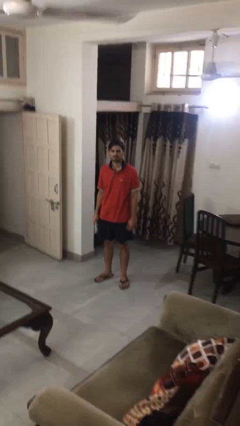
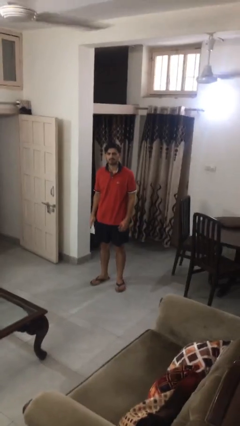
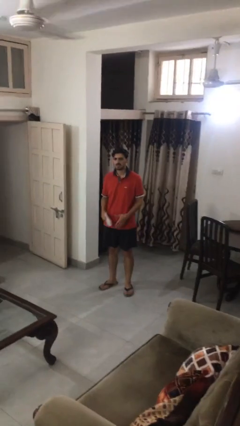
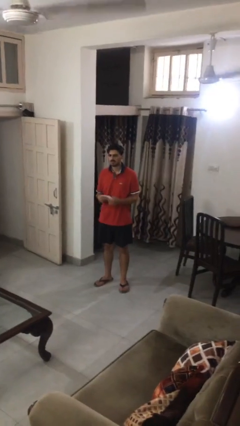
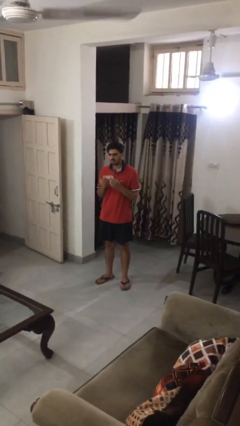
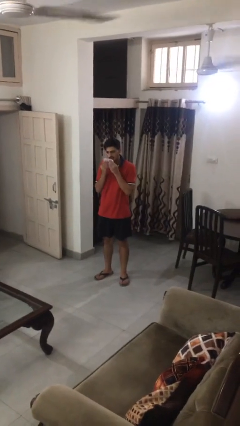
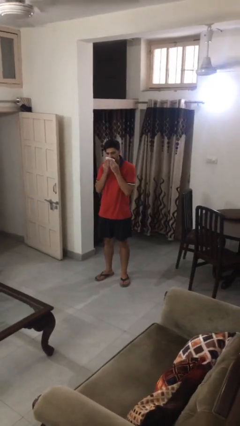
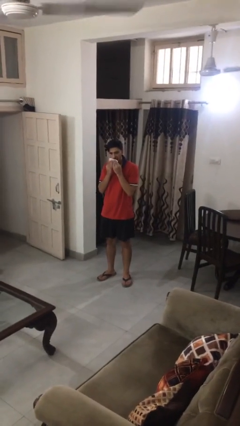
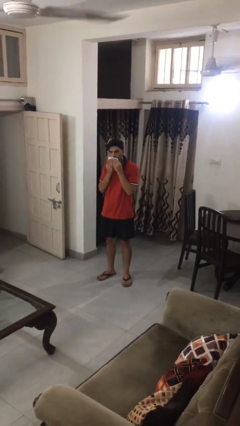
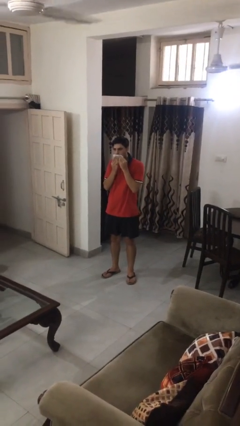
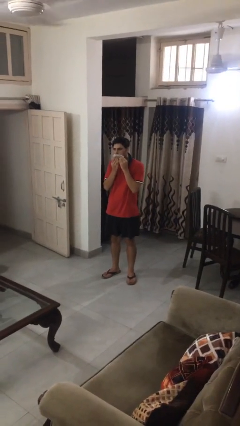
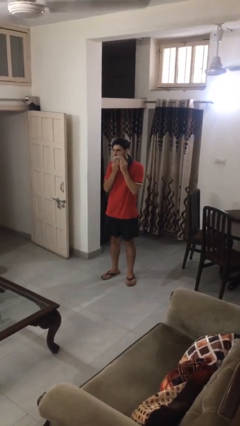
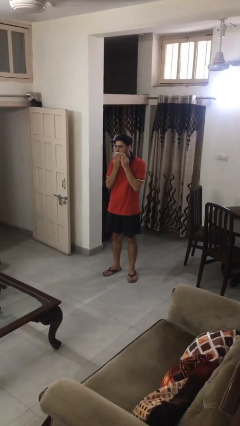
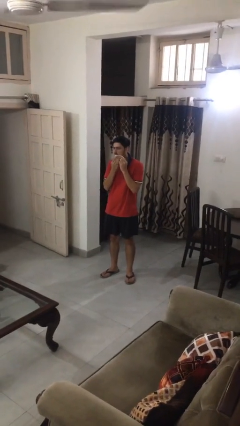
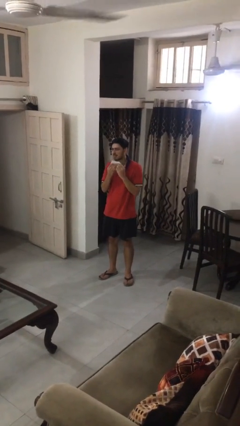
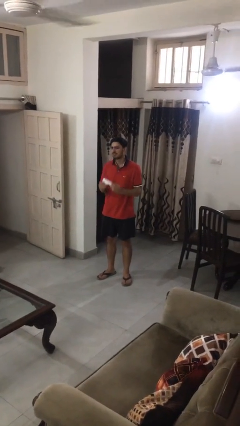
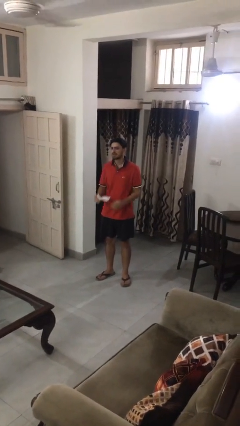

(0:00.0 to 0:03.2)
person wipes mouth with napkin

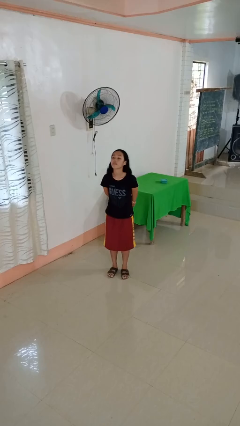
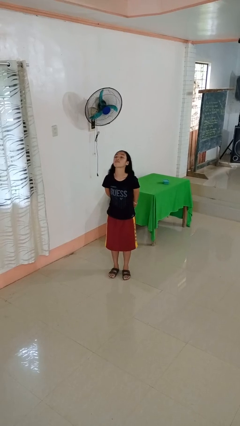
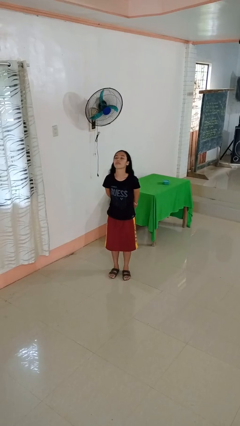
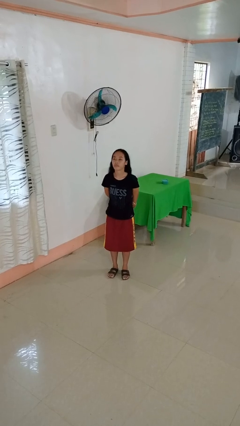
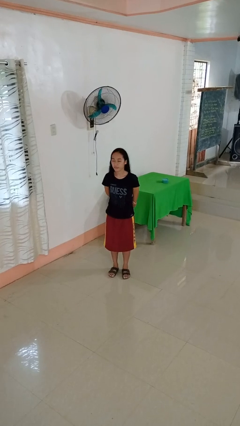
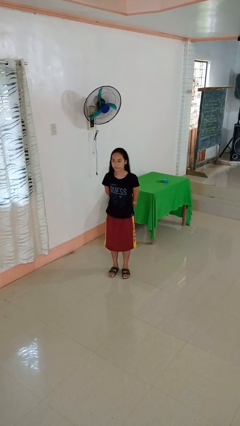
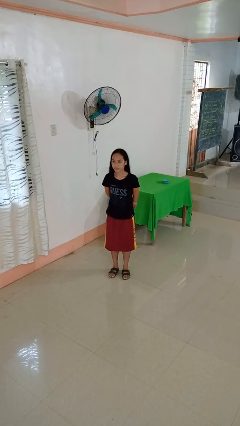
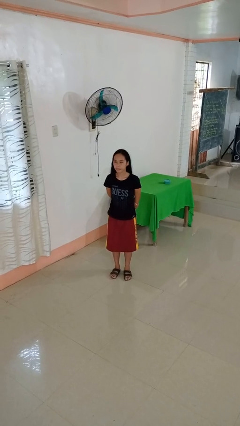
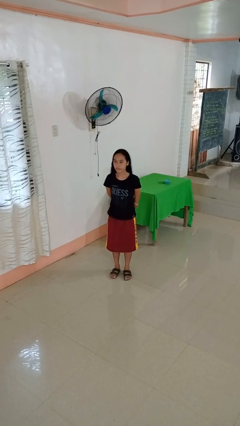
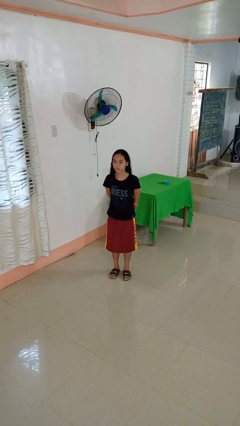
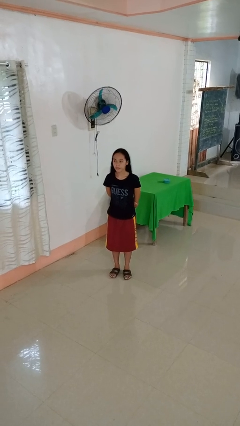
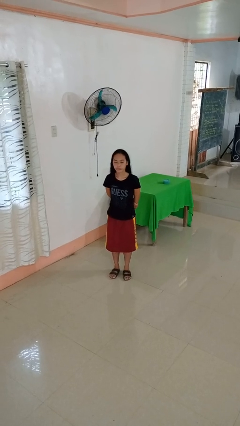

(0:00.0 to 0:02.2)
person nods head

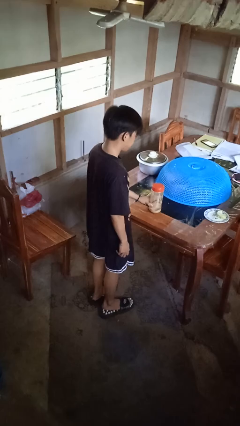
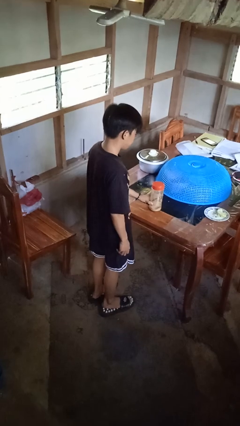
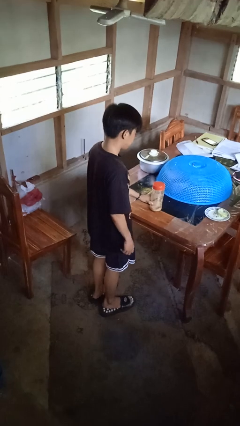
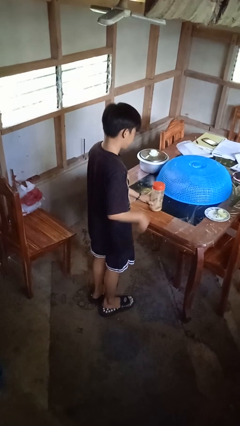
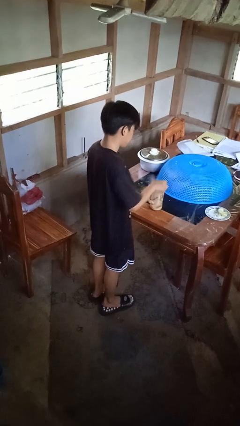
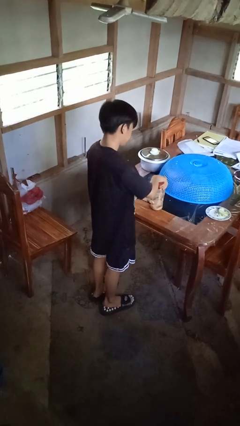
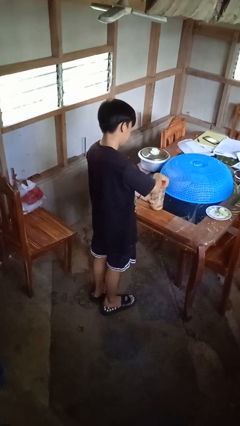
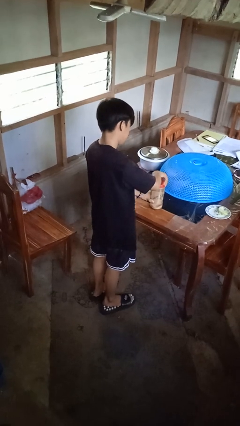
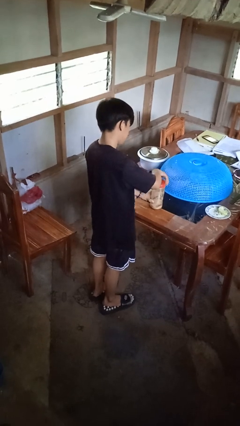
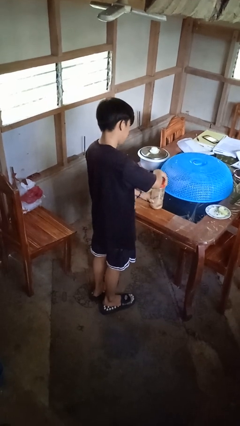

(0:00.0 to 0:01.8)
person opens jar

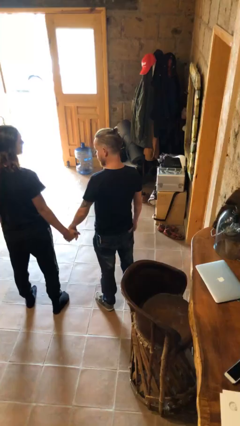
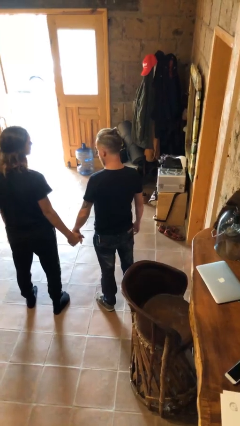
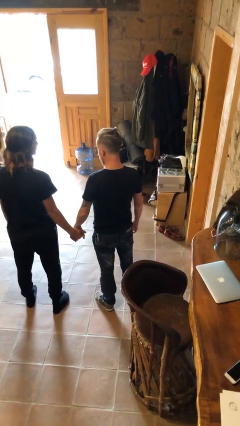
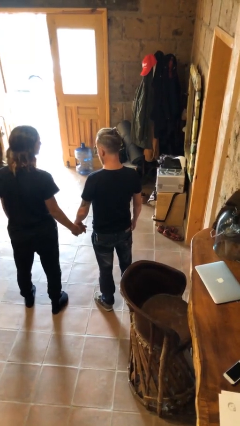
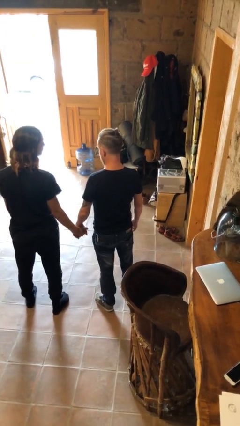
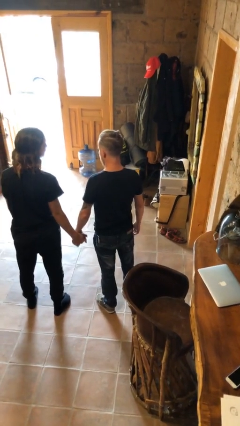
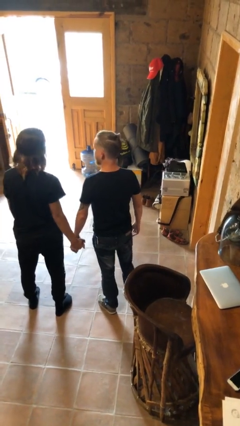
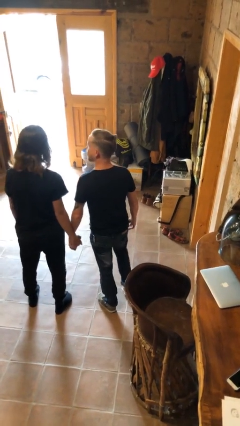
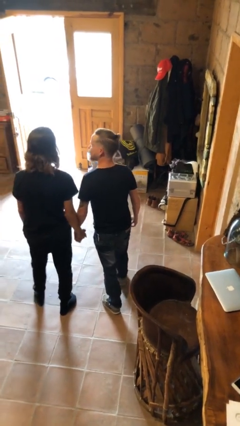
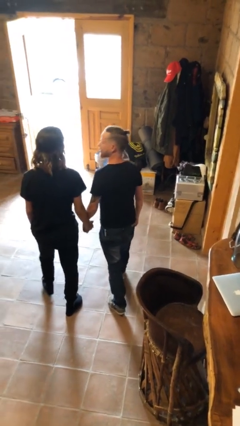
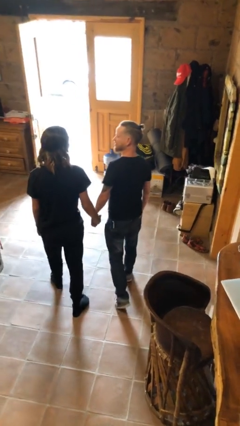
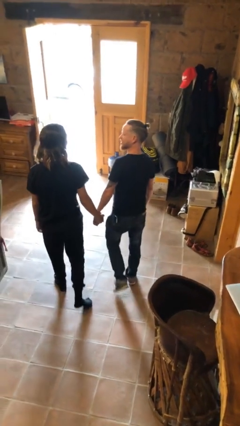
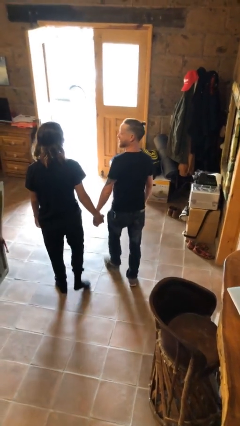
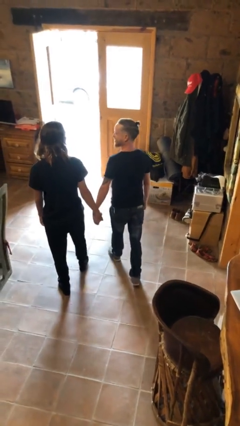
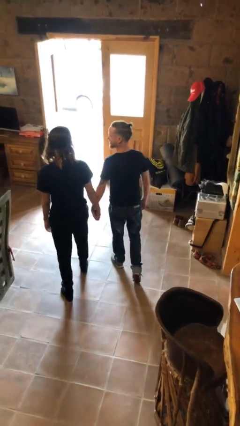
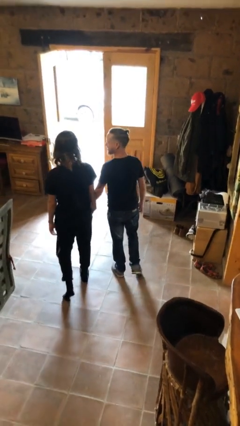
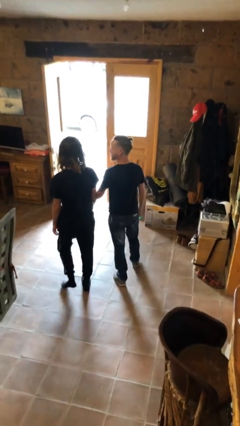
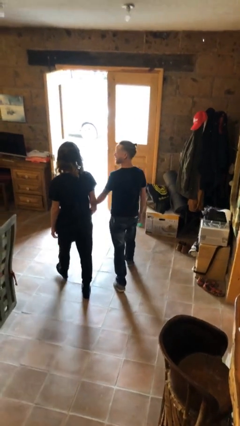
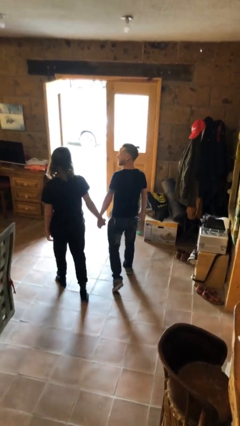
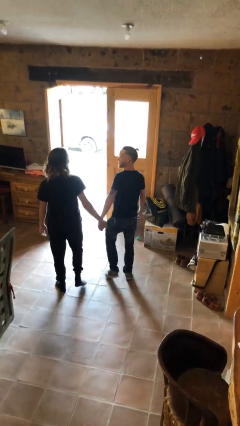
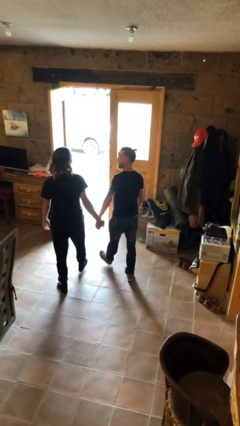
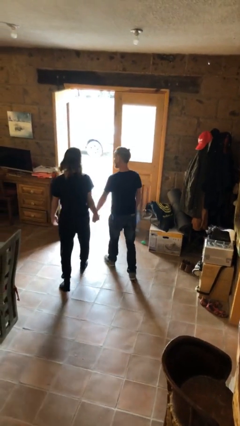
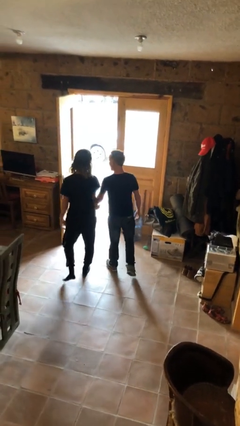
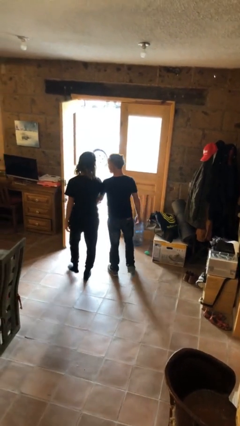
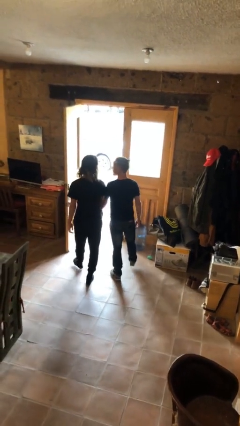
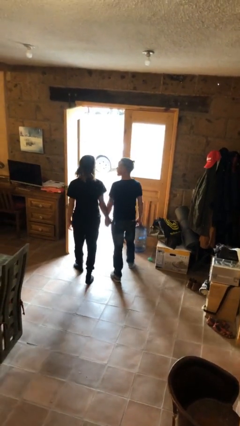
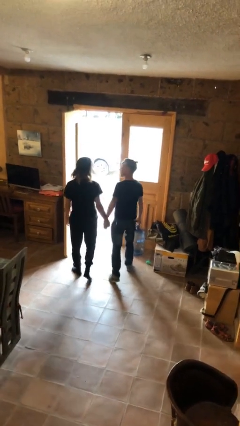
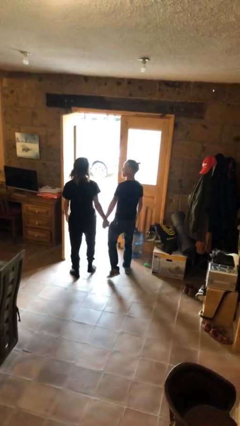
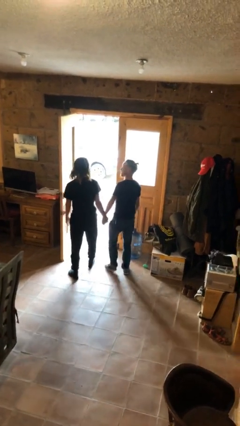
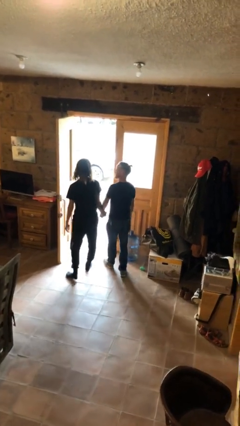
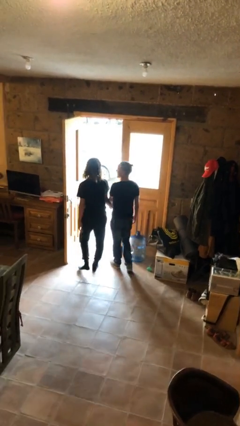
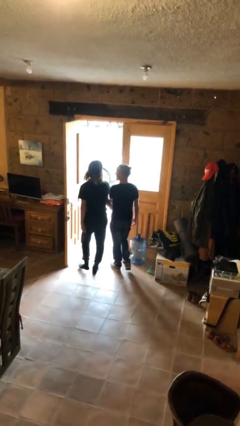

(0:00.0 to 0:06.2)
person holds hand

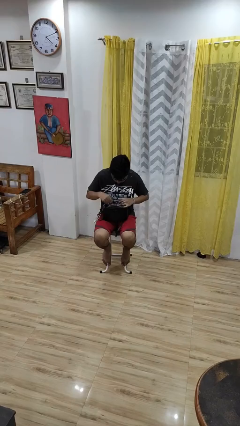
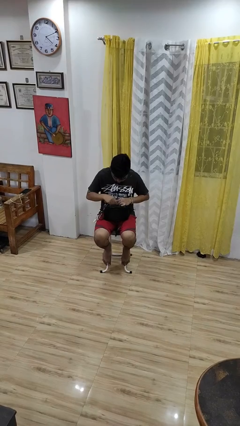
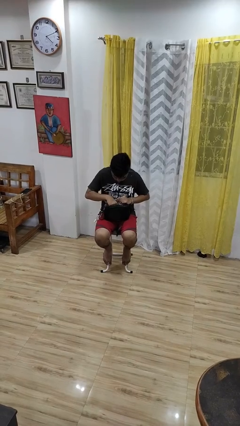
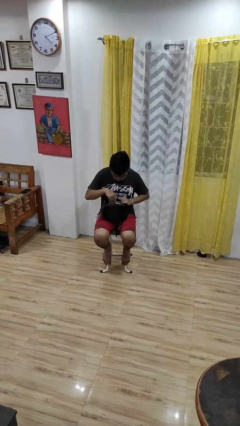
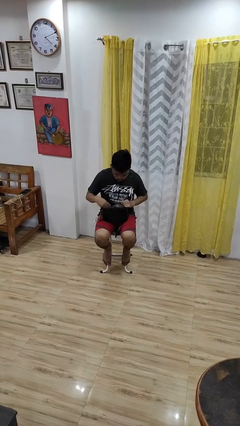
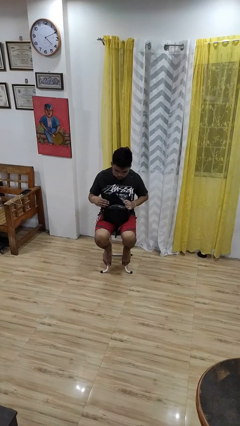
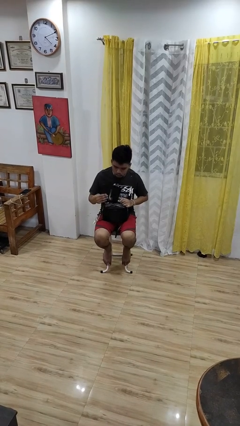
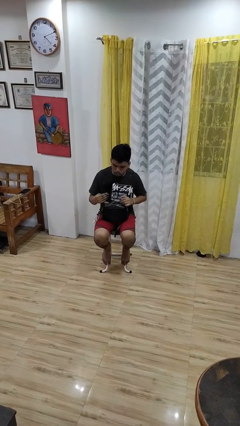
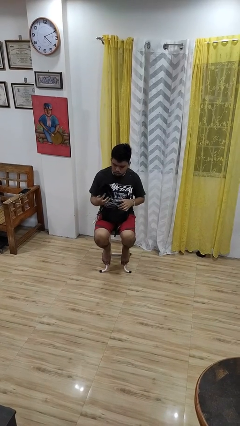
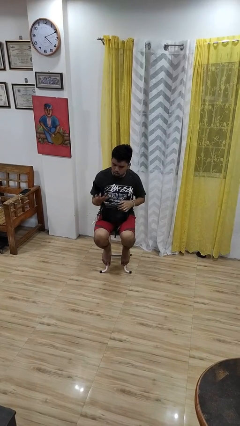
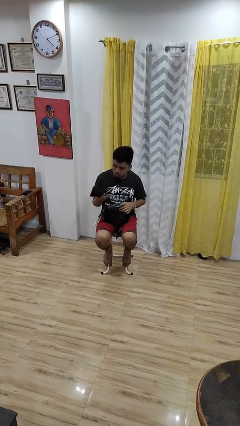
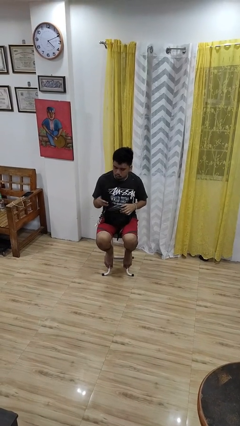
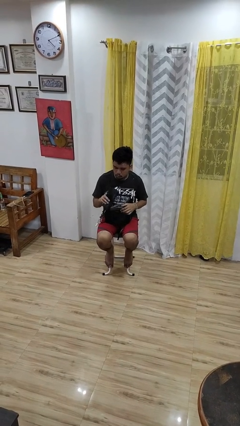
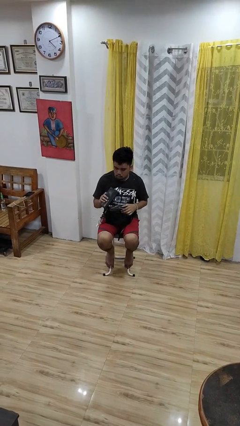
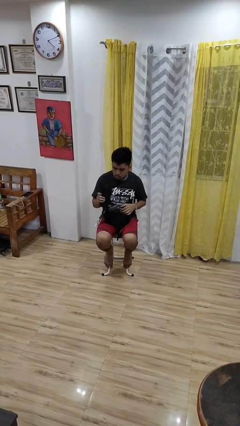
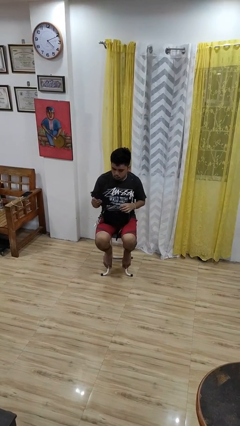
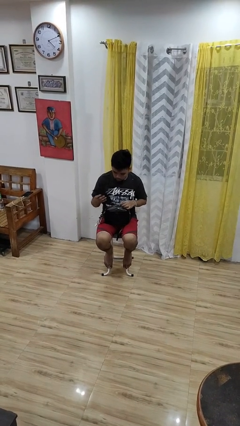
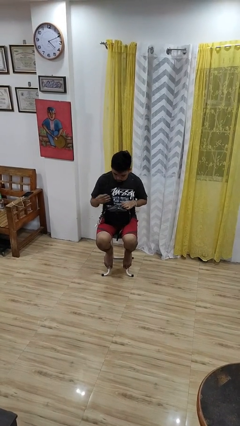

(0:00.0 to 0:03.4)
person takes object from purse

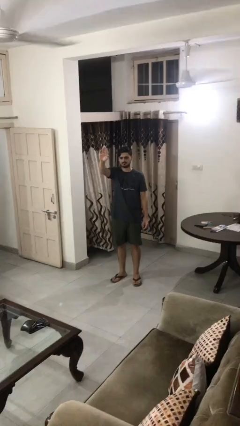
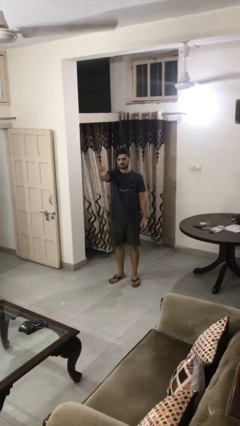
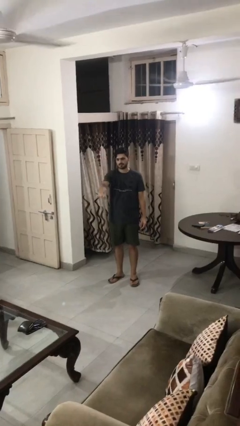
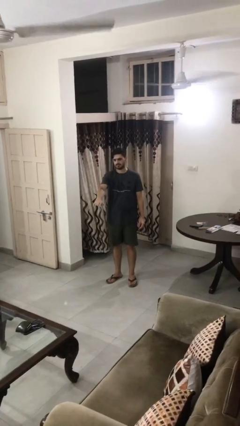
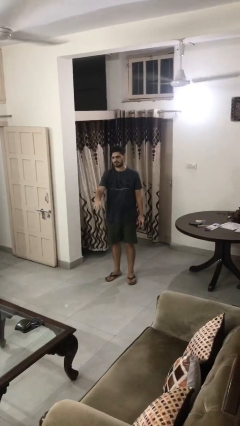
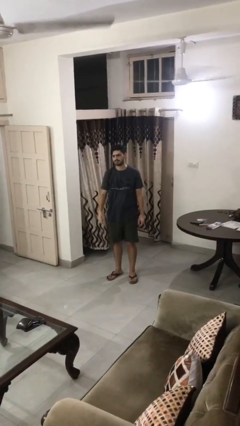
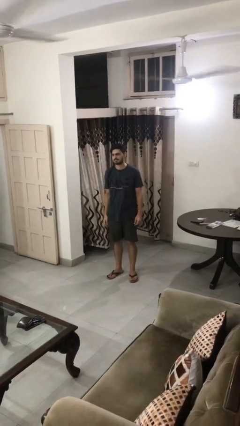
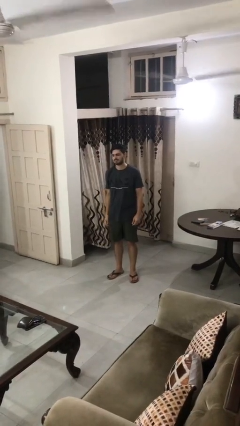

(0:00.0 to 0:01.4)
person gestures swipe down
